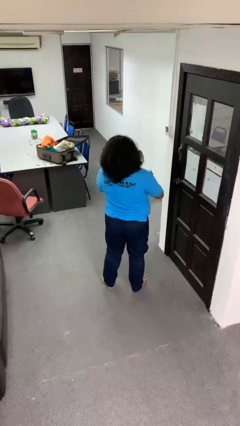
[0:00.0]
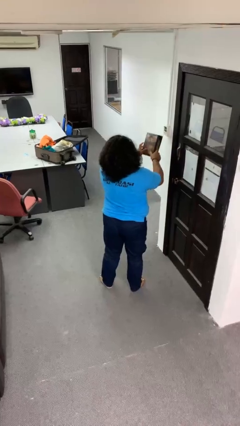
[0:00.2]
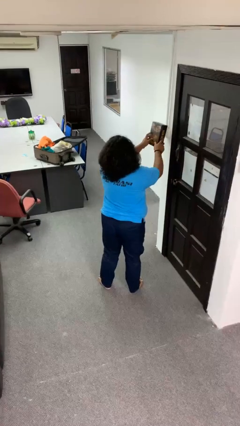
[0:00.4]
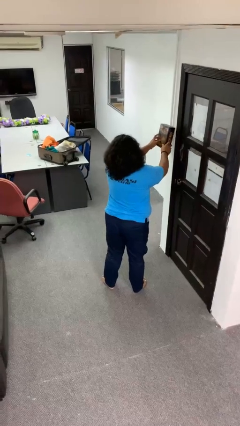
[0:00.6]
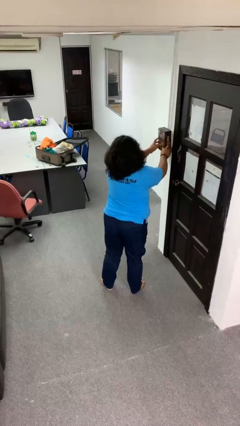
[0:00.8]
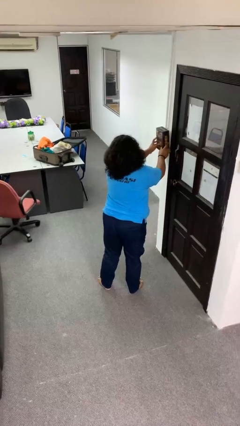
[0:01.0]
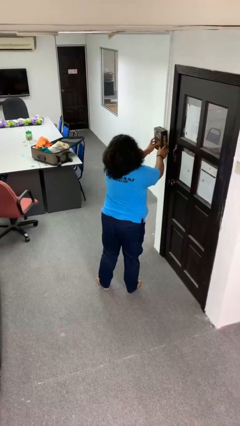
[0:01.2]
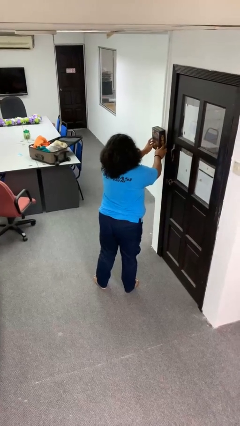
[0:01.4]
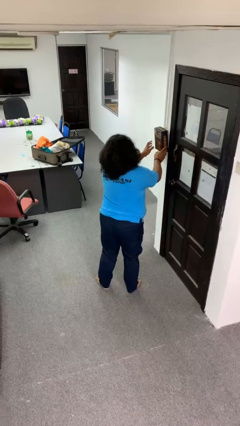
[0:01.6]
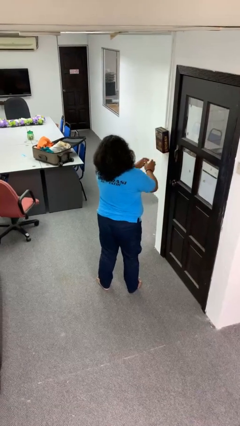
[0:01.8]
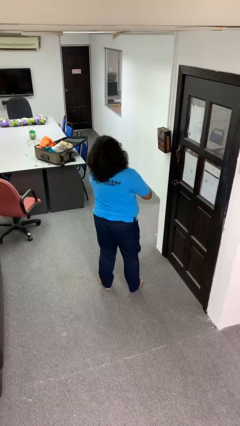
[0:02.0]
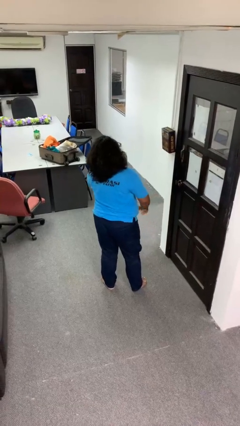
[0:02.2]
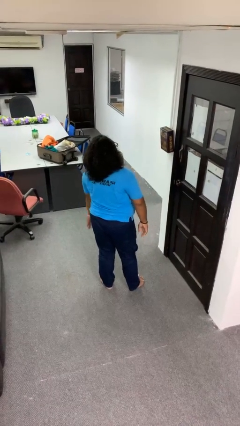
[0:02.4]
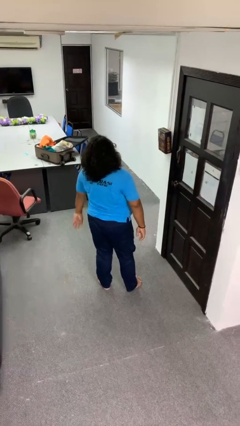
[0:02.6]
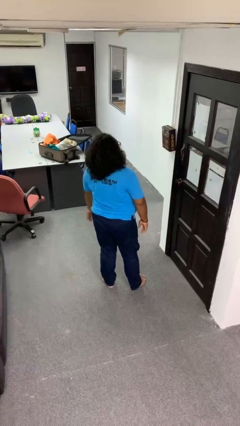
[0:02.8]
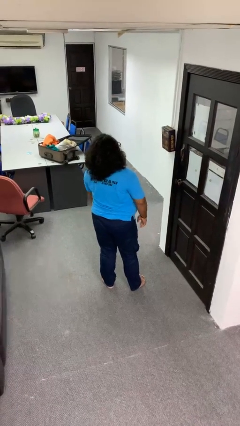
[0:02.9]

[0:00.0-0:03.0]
person puts up picture frame

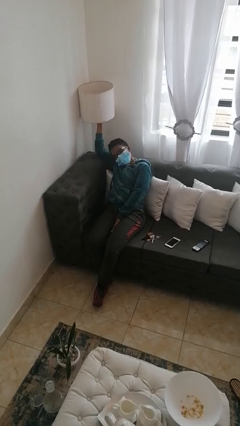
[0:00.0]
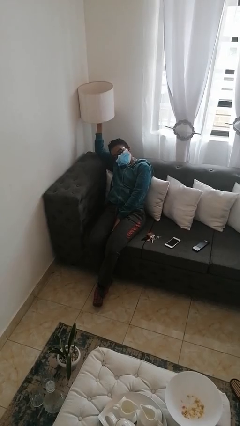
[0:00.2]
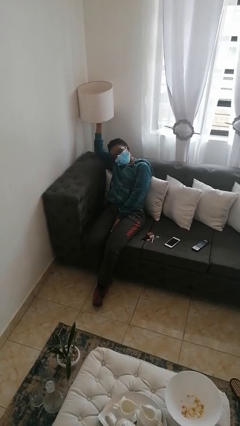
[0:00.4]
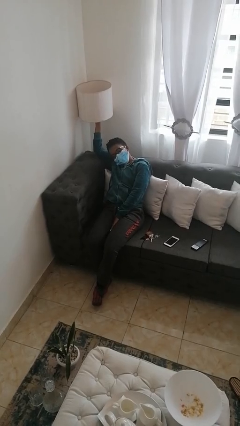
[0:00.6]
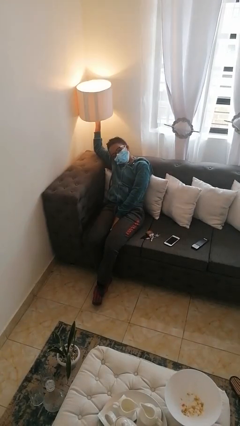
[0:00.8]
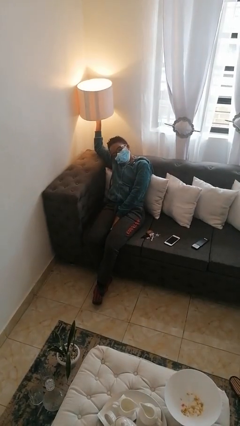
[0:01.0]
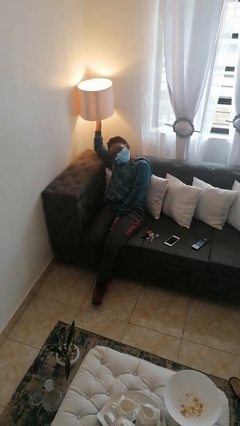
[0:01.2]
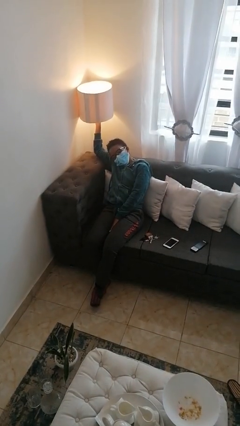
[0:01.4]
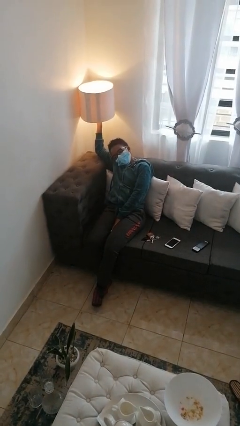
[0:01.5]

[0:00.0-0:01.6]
person turns on lamp

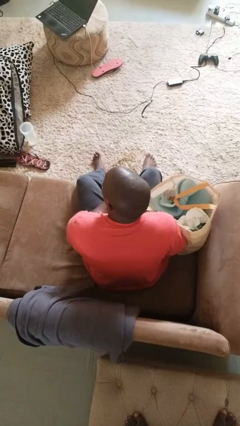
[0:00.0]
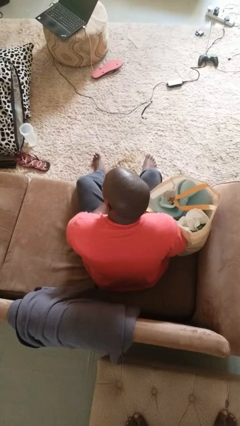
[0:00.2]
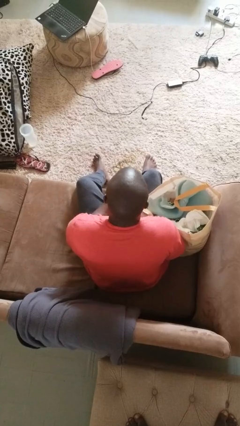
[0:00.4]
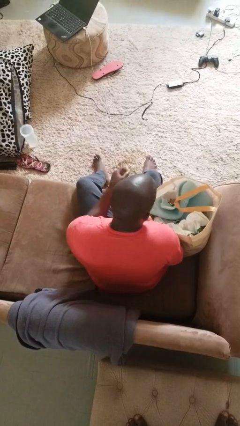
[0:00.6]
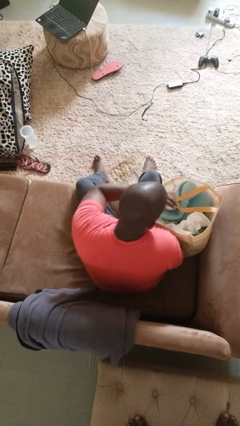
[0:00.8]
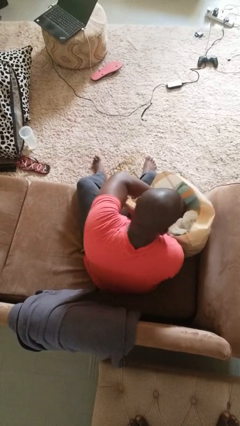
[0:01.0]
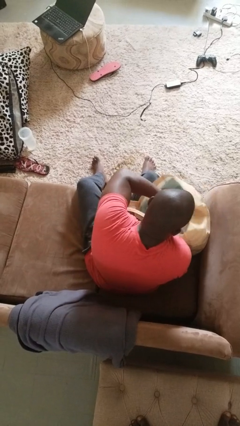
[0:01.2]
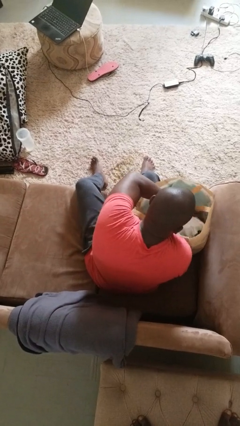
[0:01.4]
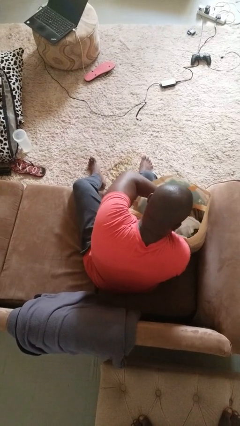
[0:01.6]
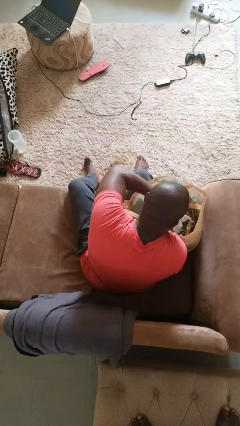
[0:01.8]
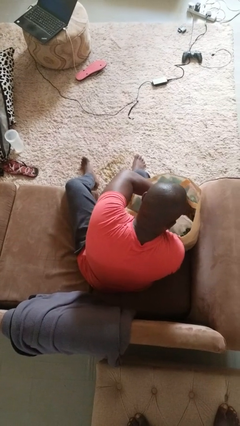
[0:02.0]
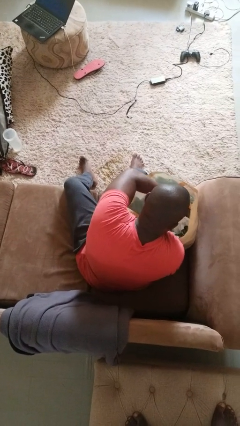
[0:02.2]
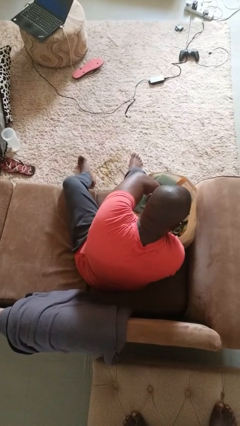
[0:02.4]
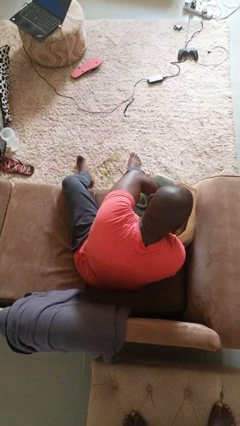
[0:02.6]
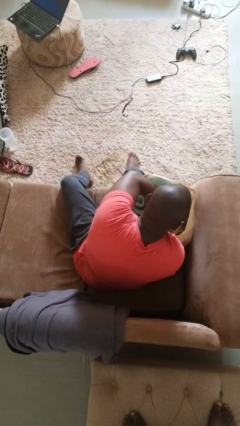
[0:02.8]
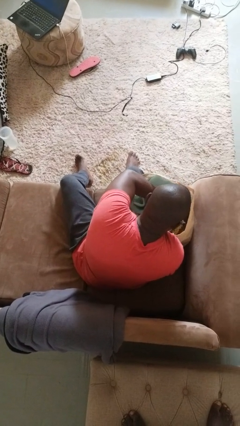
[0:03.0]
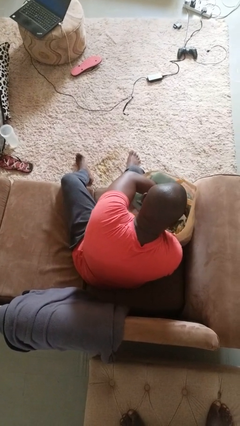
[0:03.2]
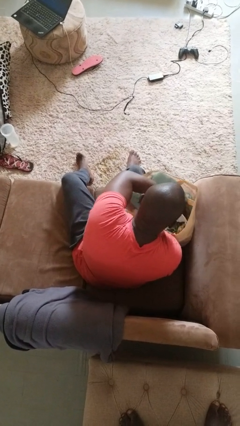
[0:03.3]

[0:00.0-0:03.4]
person searches in bag

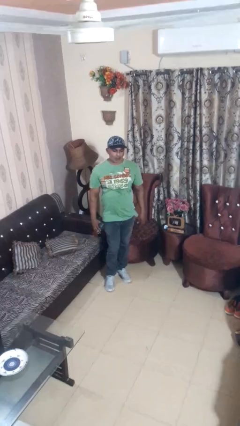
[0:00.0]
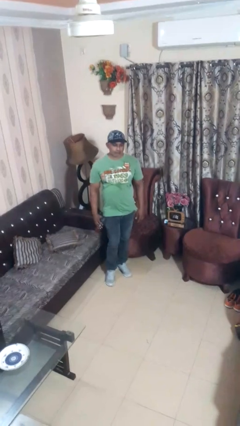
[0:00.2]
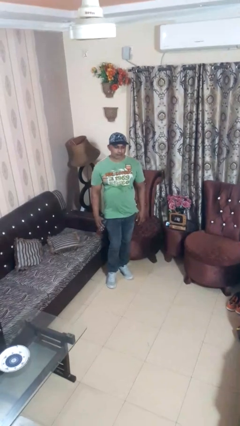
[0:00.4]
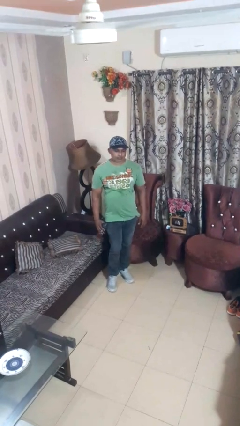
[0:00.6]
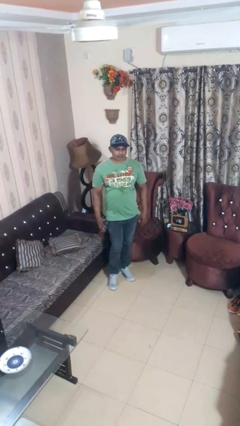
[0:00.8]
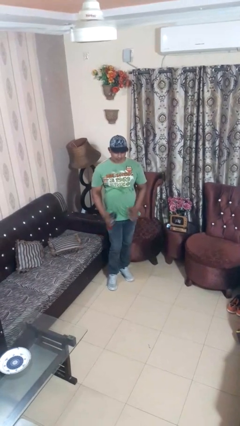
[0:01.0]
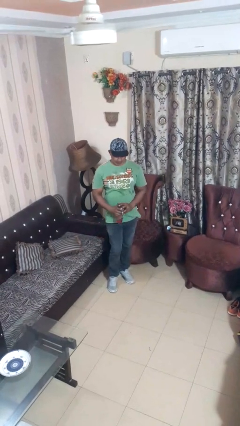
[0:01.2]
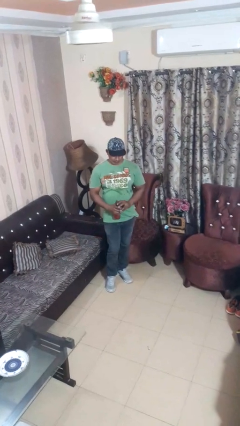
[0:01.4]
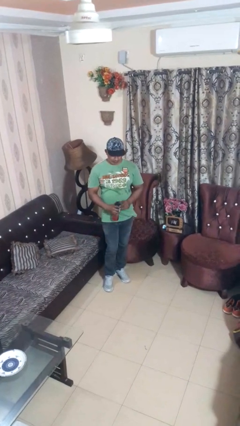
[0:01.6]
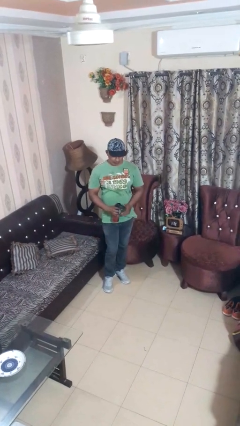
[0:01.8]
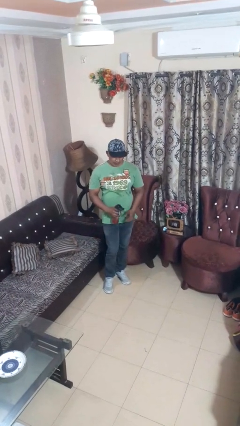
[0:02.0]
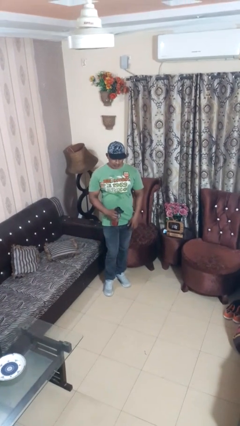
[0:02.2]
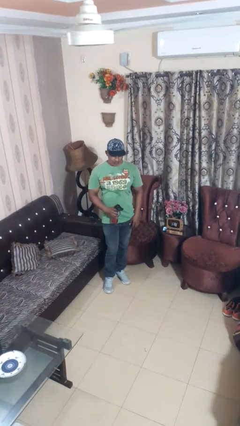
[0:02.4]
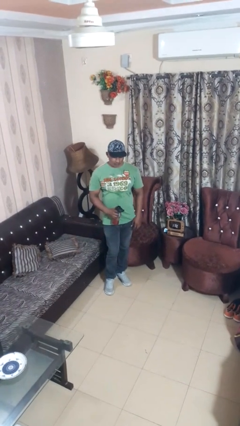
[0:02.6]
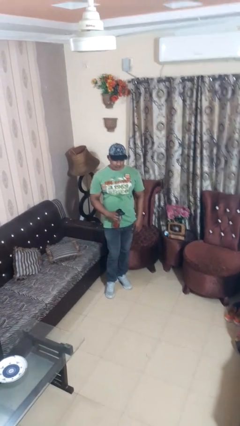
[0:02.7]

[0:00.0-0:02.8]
person opens beverage can

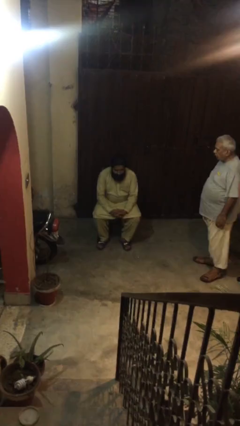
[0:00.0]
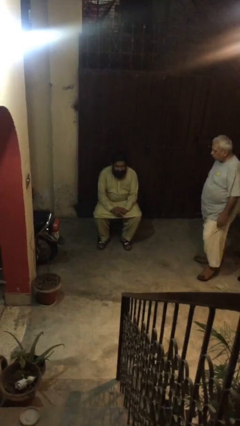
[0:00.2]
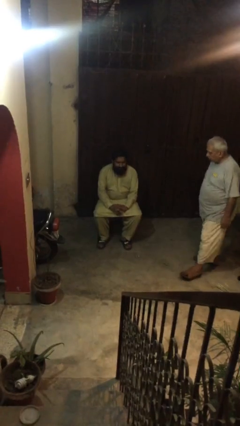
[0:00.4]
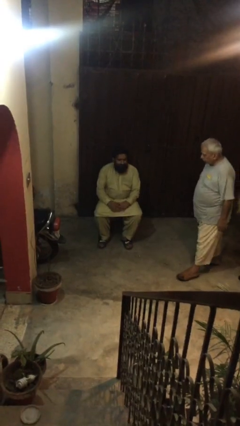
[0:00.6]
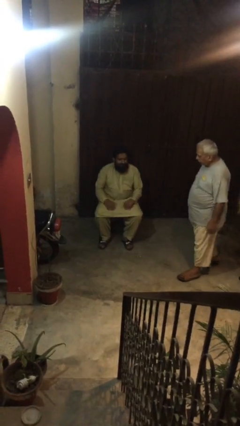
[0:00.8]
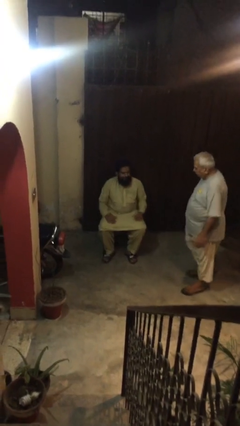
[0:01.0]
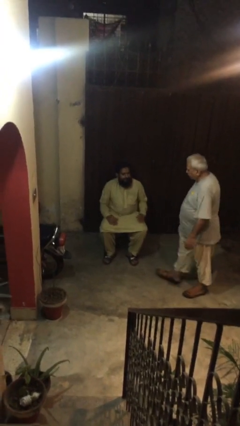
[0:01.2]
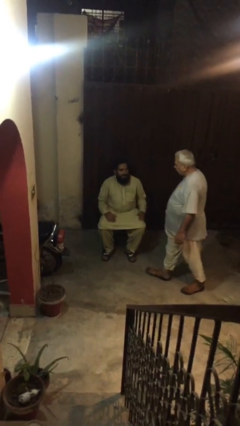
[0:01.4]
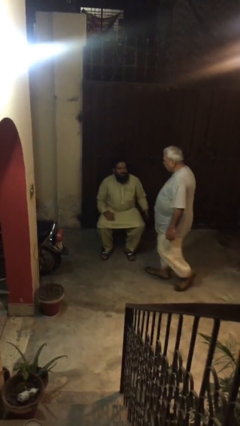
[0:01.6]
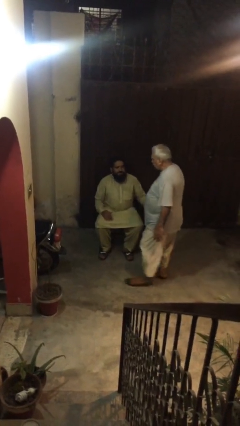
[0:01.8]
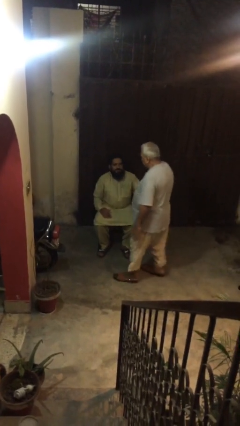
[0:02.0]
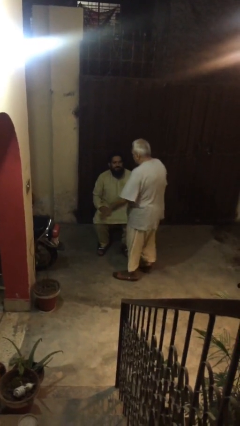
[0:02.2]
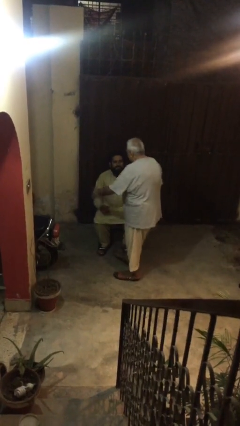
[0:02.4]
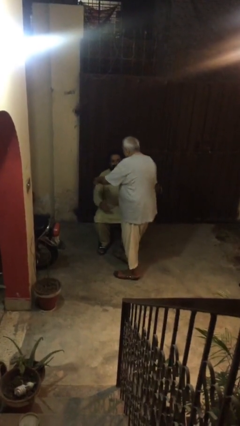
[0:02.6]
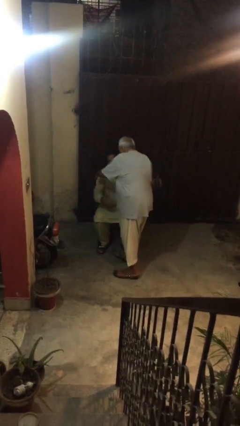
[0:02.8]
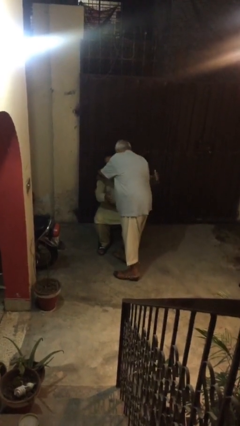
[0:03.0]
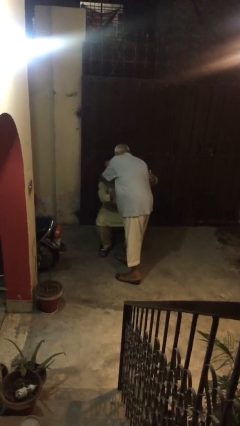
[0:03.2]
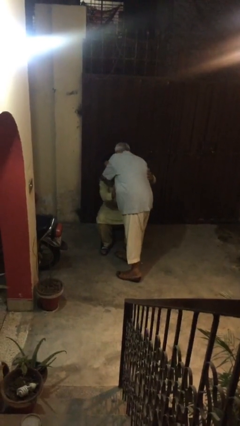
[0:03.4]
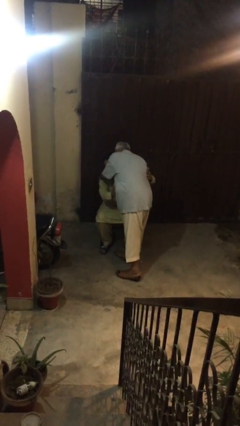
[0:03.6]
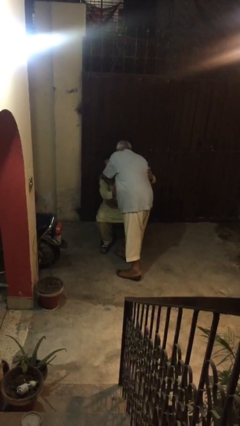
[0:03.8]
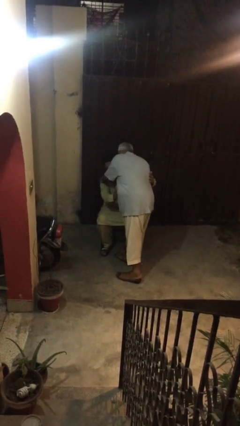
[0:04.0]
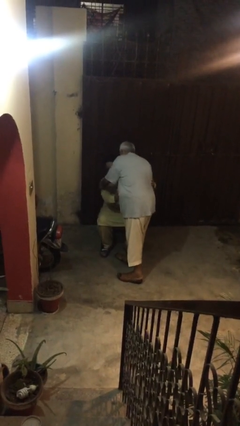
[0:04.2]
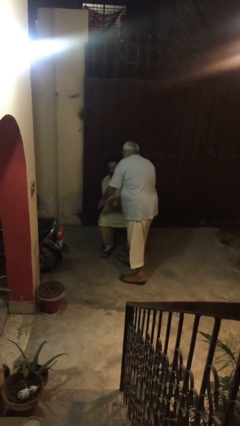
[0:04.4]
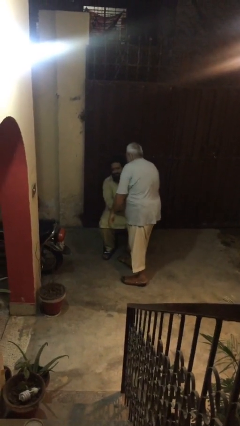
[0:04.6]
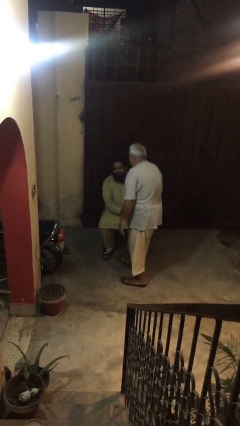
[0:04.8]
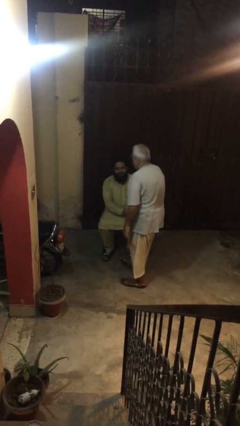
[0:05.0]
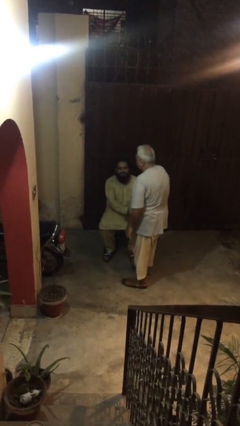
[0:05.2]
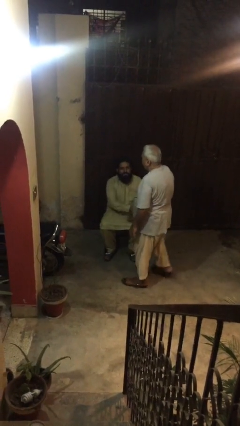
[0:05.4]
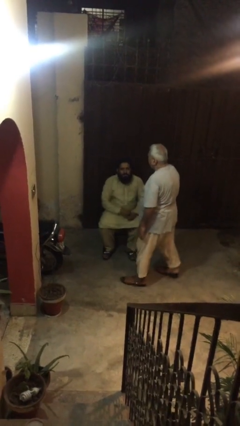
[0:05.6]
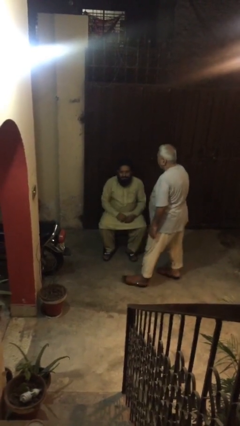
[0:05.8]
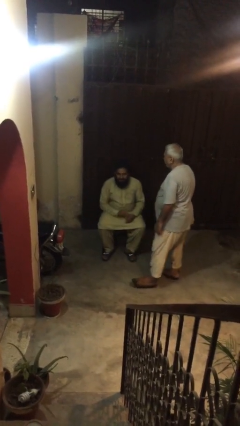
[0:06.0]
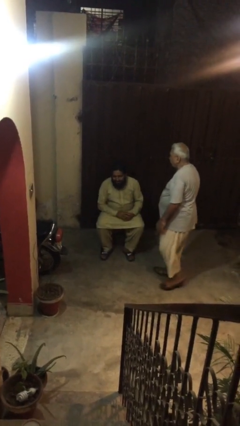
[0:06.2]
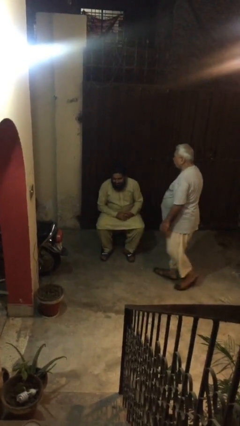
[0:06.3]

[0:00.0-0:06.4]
person embraces person

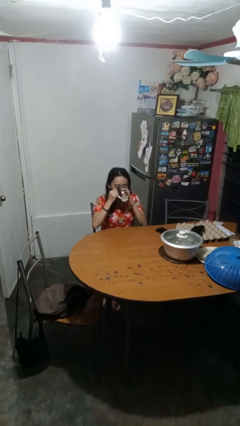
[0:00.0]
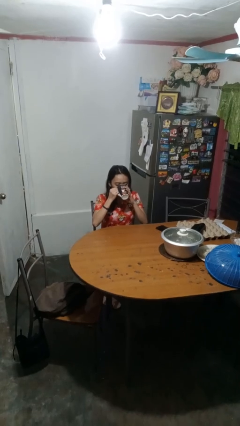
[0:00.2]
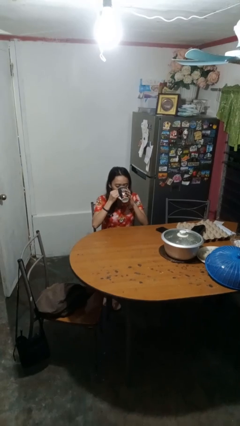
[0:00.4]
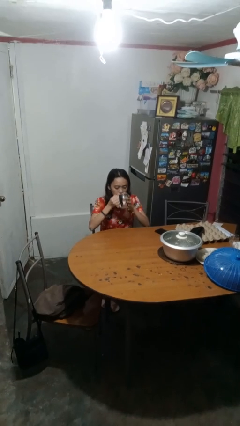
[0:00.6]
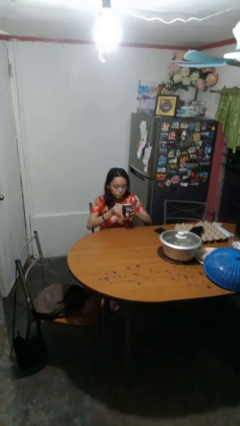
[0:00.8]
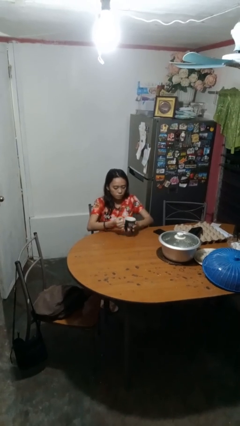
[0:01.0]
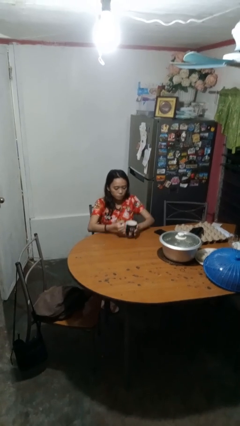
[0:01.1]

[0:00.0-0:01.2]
person puts down object on table
